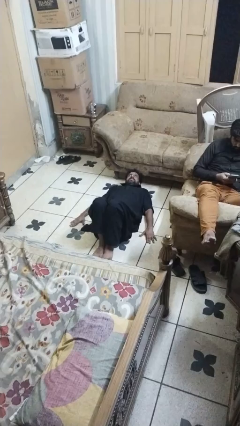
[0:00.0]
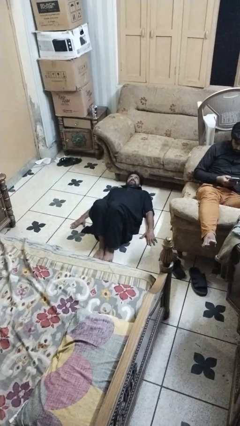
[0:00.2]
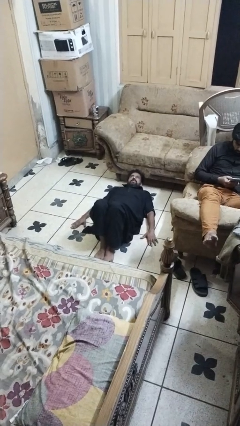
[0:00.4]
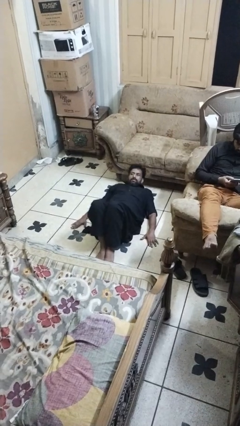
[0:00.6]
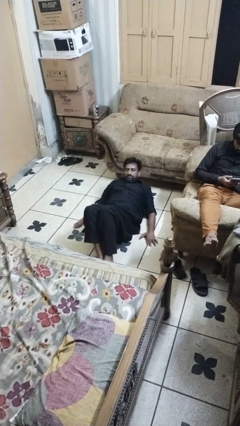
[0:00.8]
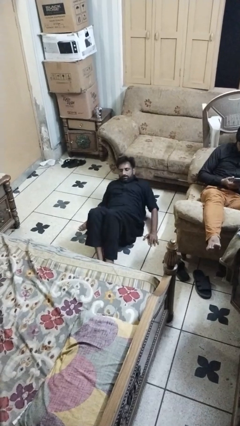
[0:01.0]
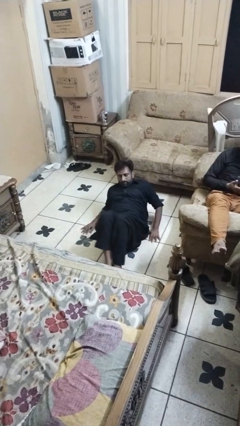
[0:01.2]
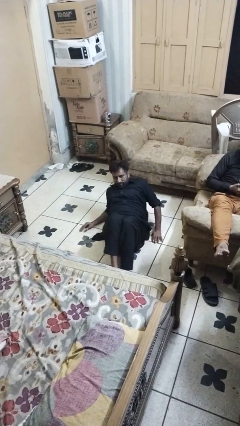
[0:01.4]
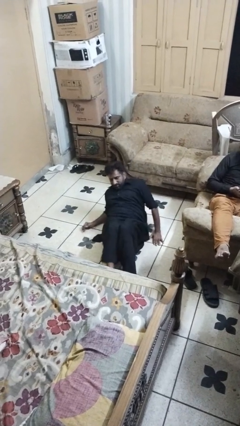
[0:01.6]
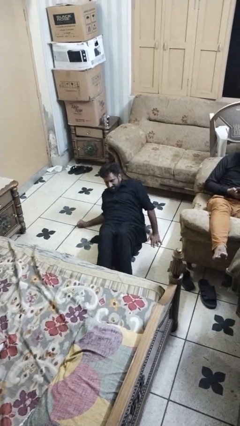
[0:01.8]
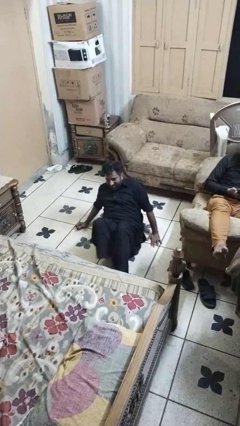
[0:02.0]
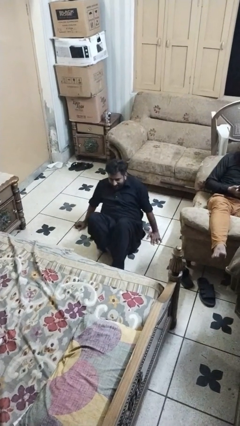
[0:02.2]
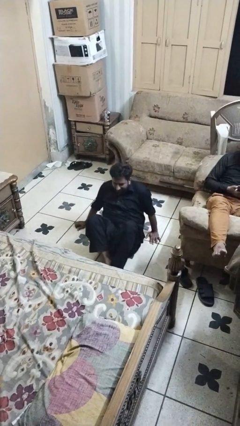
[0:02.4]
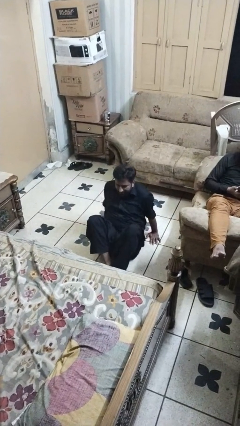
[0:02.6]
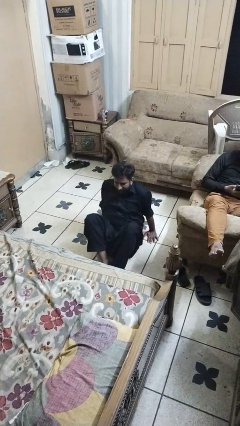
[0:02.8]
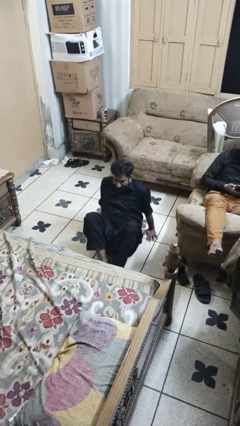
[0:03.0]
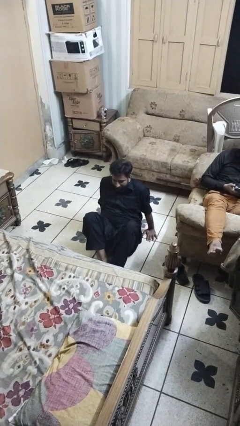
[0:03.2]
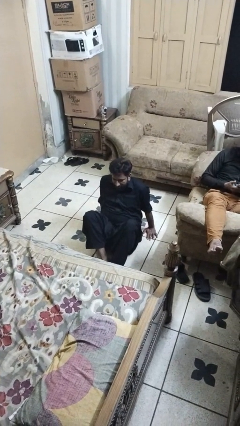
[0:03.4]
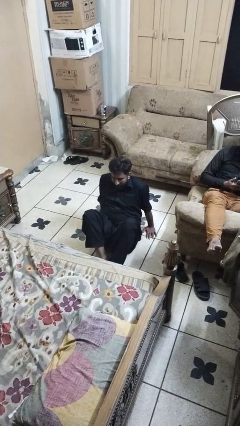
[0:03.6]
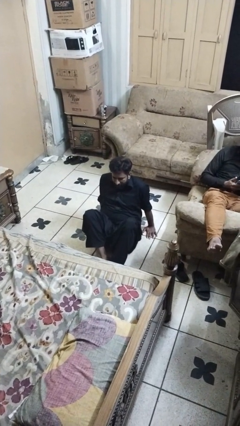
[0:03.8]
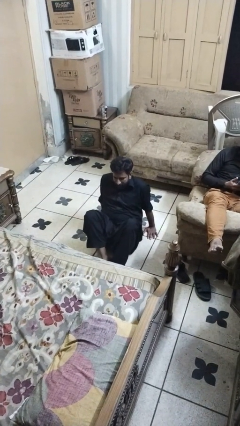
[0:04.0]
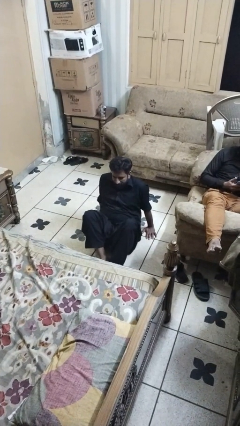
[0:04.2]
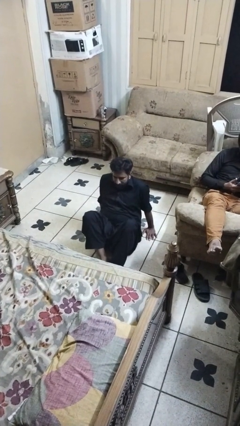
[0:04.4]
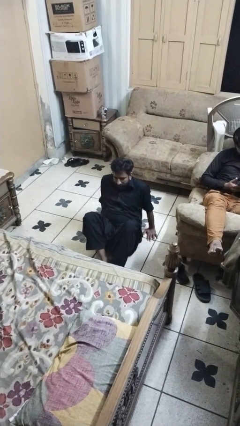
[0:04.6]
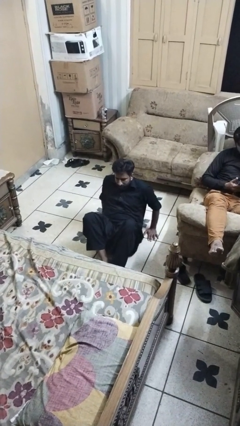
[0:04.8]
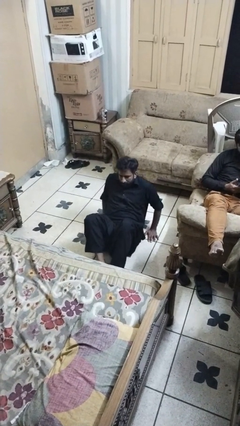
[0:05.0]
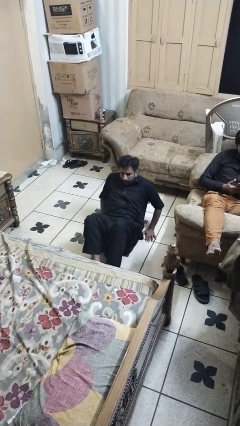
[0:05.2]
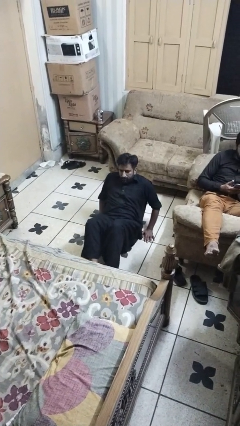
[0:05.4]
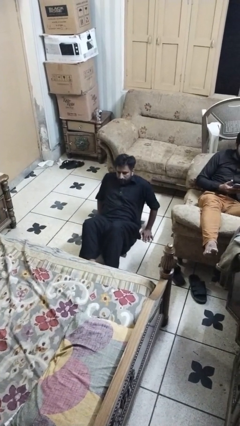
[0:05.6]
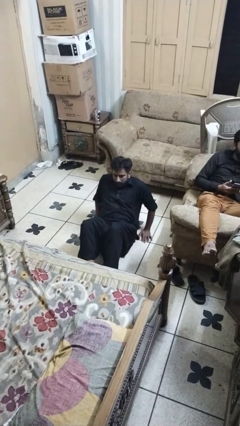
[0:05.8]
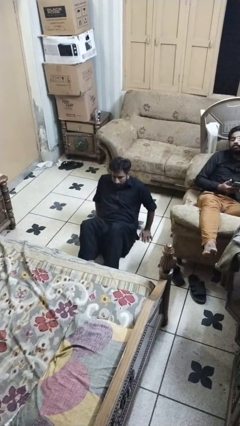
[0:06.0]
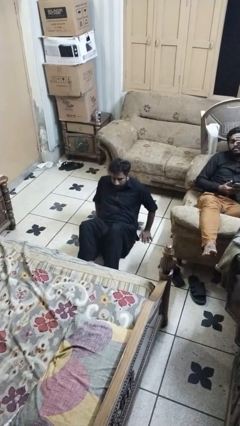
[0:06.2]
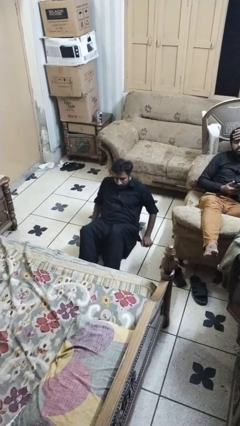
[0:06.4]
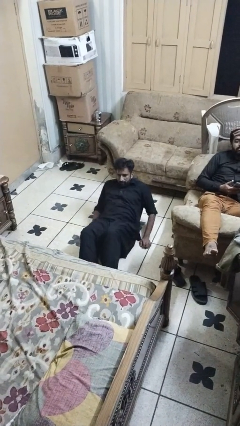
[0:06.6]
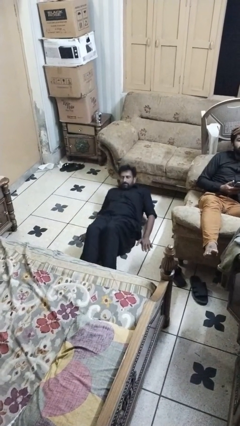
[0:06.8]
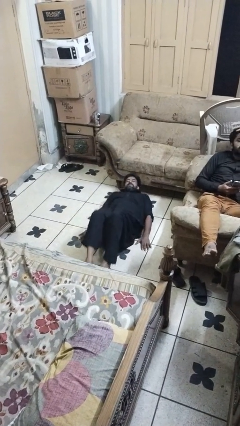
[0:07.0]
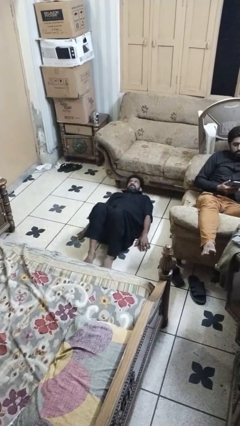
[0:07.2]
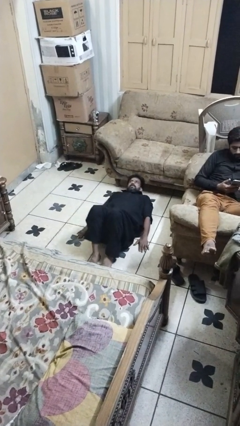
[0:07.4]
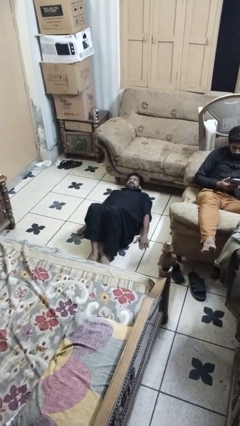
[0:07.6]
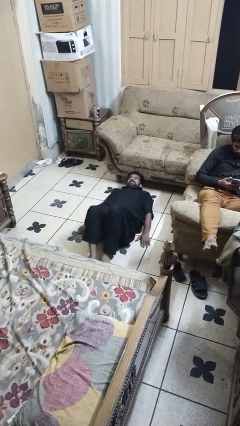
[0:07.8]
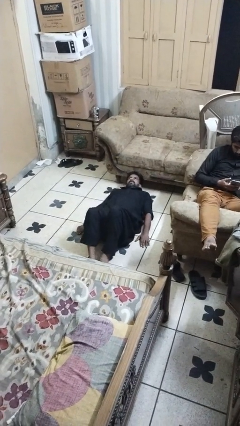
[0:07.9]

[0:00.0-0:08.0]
person exercises with situp

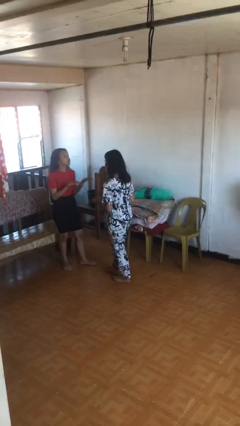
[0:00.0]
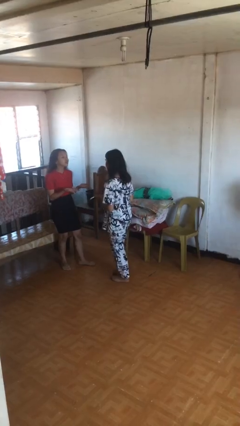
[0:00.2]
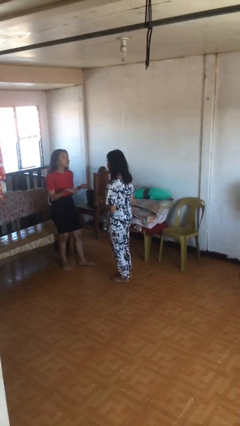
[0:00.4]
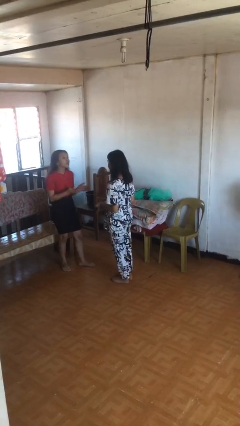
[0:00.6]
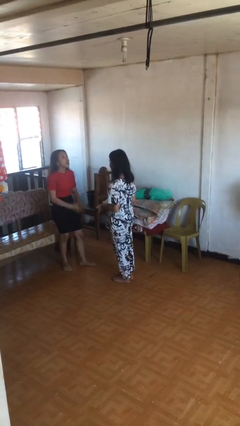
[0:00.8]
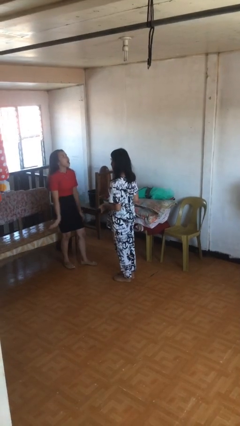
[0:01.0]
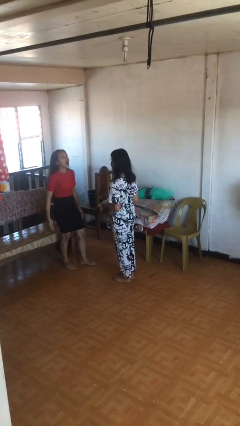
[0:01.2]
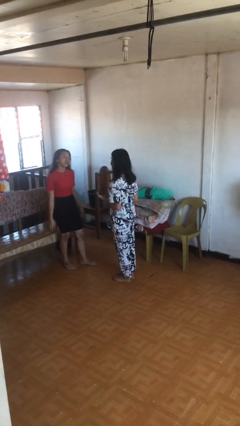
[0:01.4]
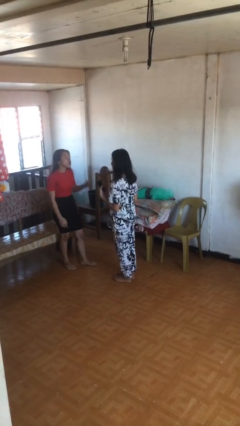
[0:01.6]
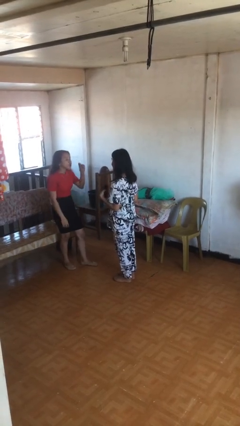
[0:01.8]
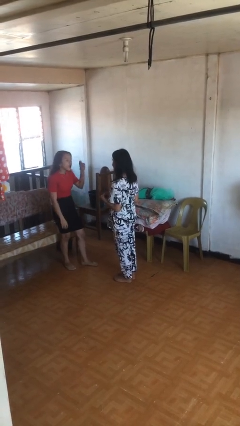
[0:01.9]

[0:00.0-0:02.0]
person talks to person

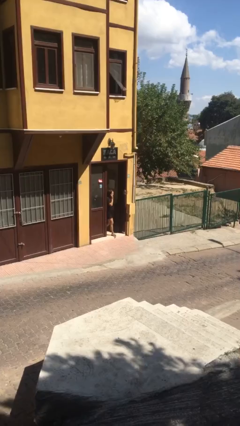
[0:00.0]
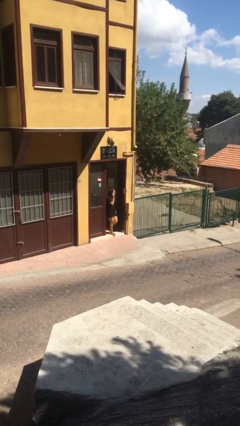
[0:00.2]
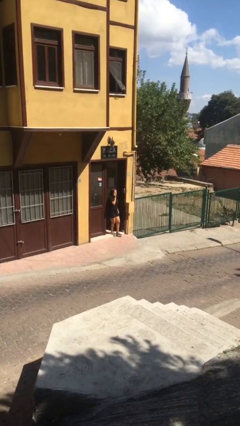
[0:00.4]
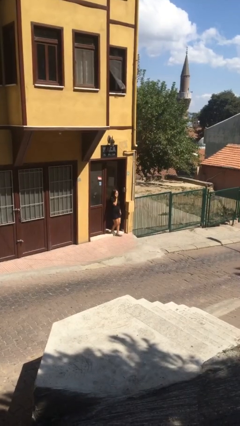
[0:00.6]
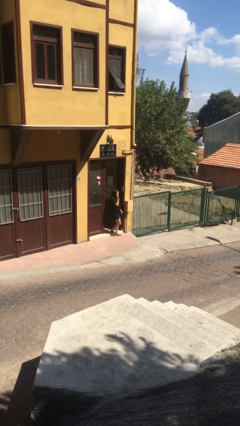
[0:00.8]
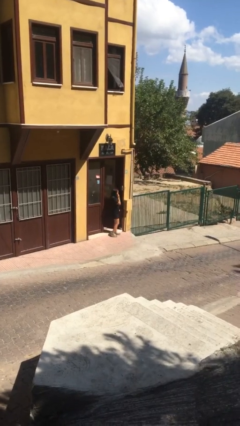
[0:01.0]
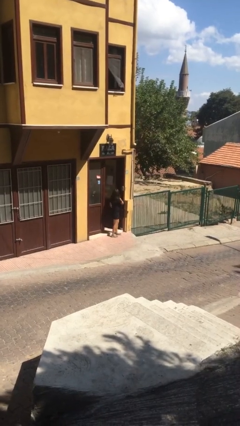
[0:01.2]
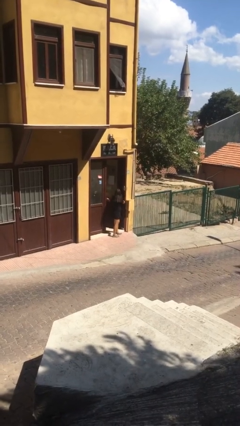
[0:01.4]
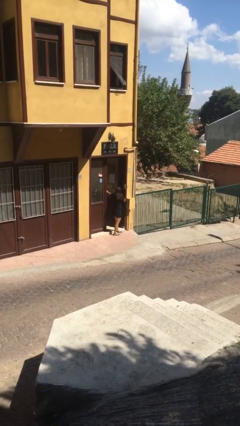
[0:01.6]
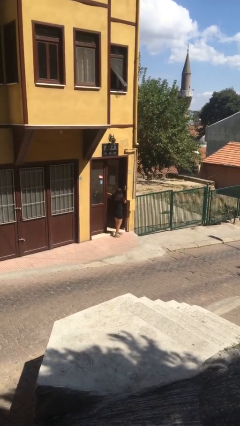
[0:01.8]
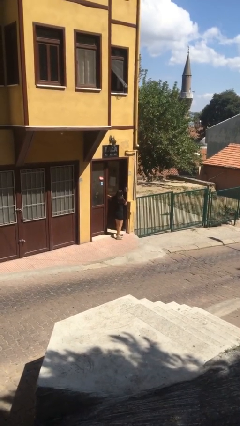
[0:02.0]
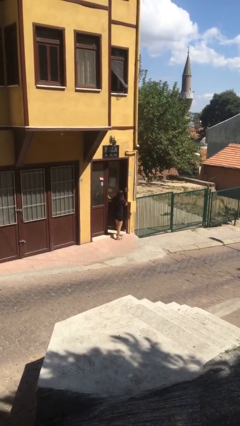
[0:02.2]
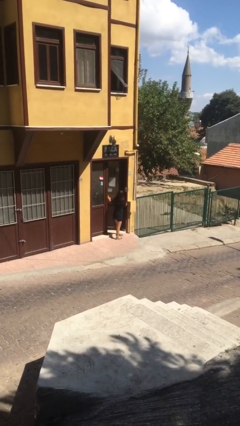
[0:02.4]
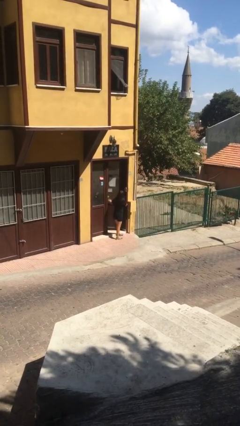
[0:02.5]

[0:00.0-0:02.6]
person enters scene through structure

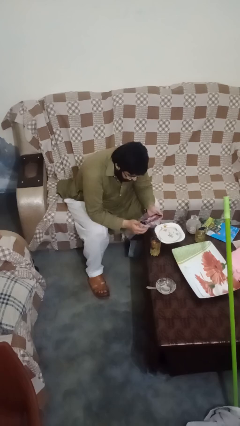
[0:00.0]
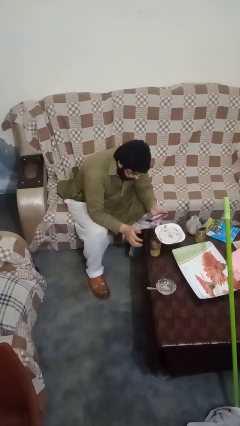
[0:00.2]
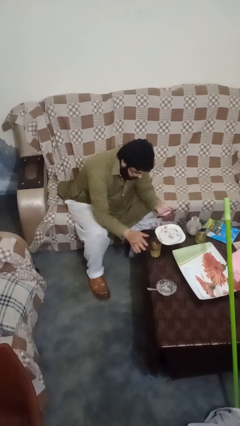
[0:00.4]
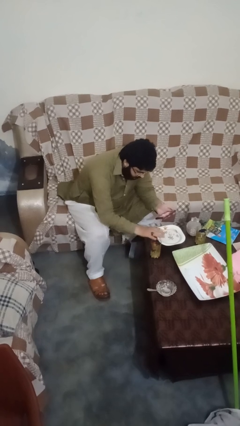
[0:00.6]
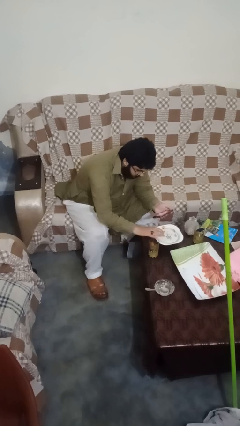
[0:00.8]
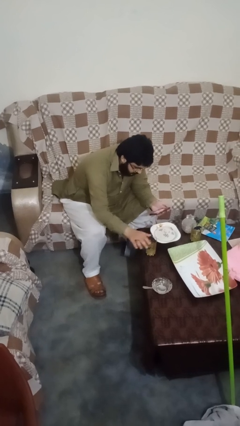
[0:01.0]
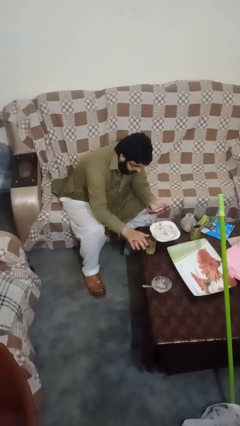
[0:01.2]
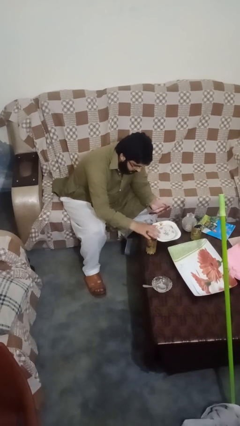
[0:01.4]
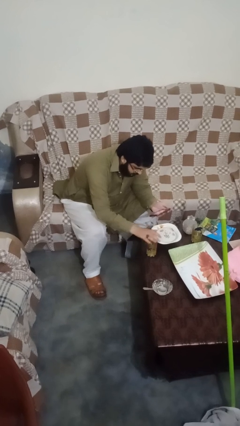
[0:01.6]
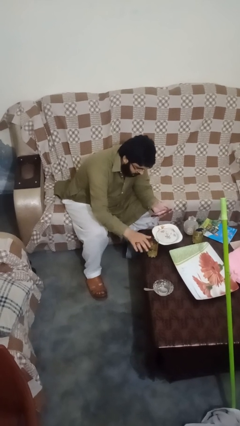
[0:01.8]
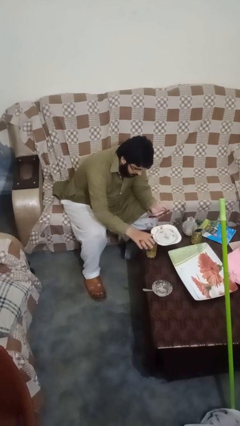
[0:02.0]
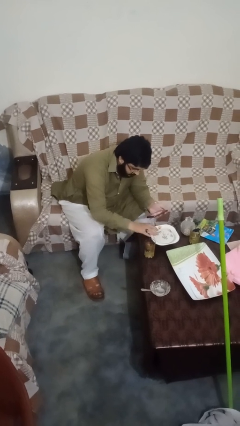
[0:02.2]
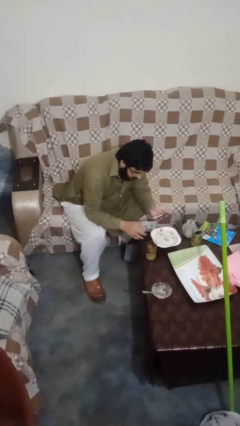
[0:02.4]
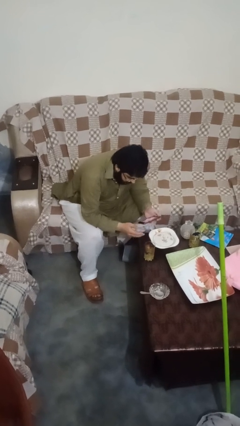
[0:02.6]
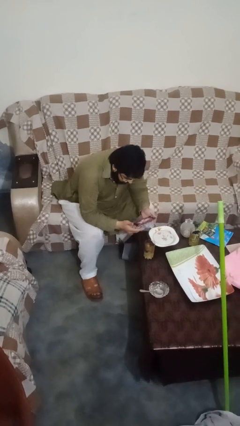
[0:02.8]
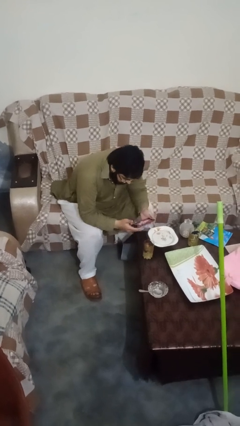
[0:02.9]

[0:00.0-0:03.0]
person waves hand over object

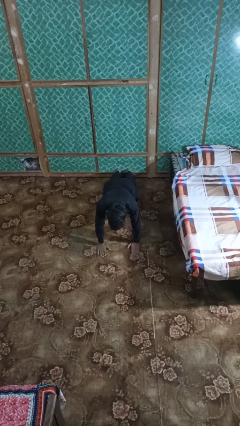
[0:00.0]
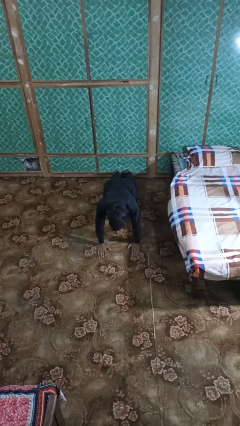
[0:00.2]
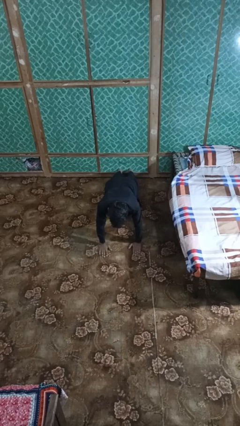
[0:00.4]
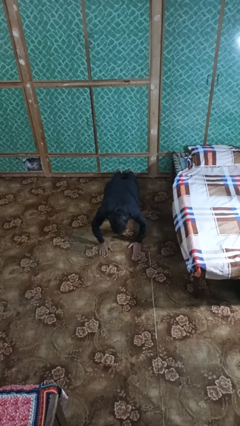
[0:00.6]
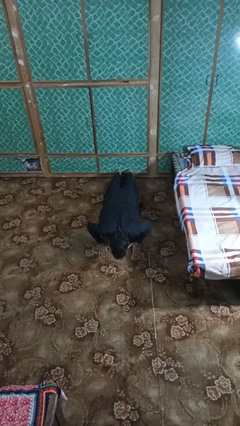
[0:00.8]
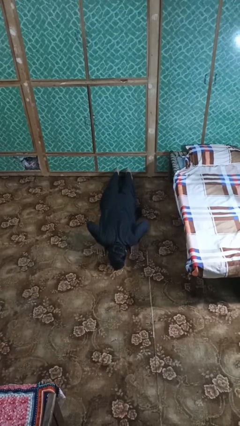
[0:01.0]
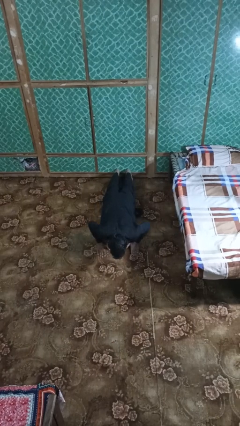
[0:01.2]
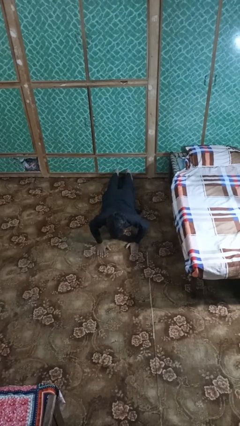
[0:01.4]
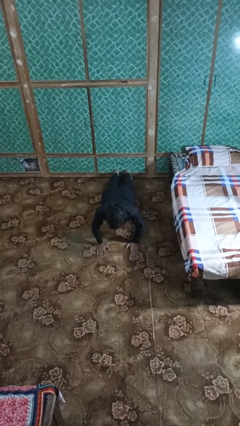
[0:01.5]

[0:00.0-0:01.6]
person exercises with pushup

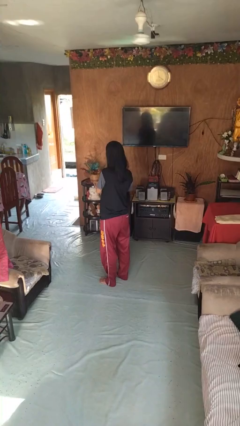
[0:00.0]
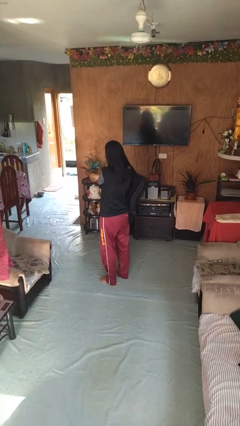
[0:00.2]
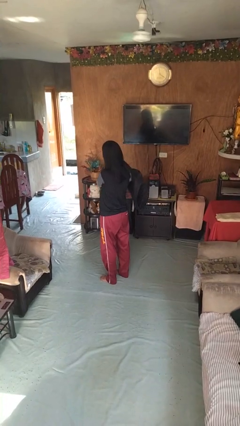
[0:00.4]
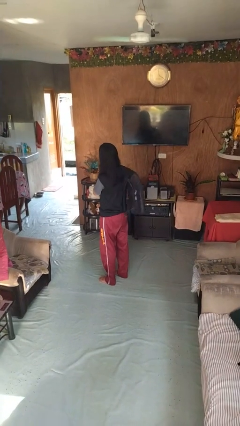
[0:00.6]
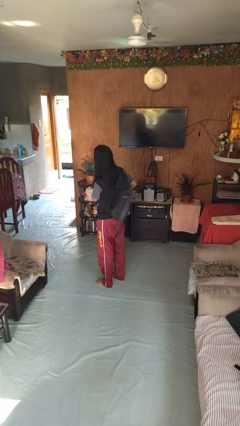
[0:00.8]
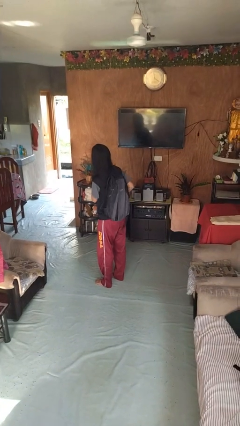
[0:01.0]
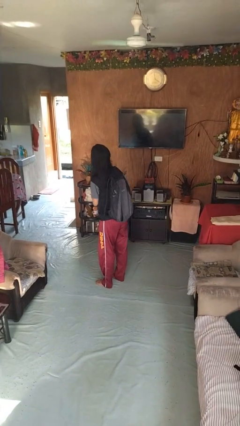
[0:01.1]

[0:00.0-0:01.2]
person puts on backpack
